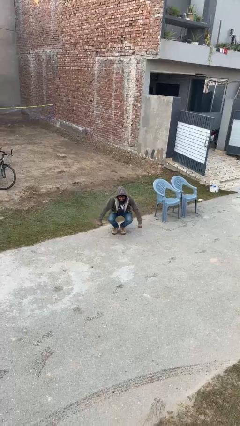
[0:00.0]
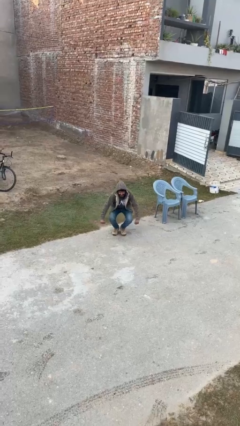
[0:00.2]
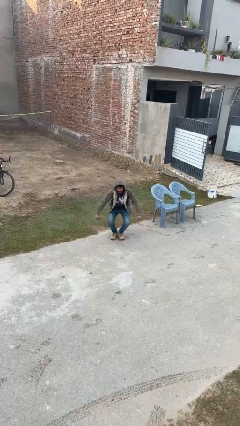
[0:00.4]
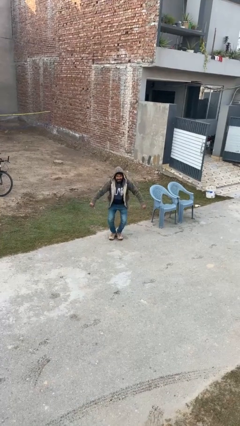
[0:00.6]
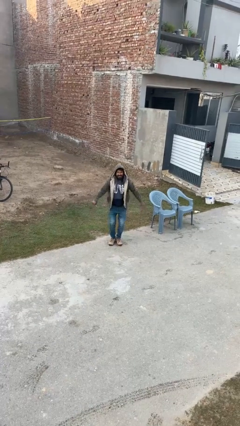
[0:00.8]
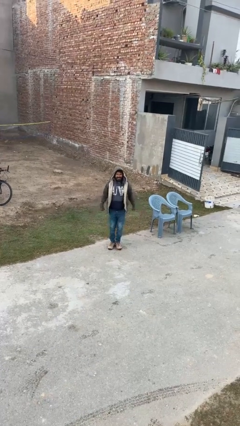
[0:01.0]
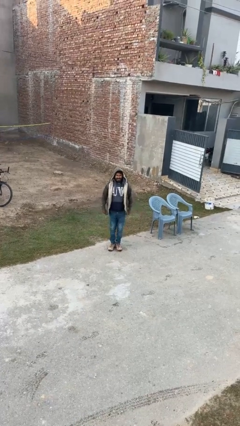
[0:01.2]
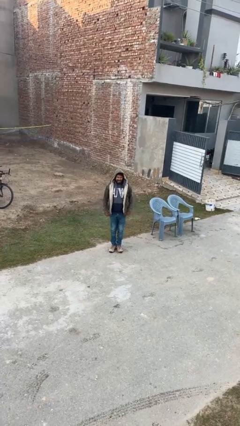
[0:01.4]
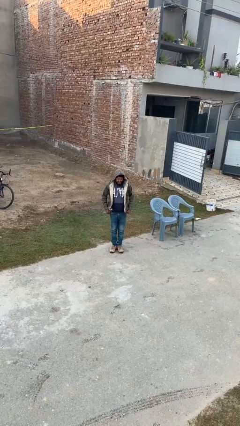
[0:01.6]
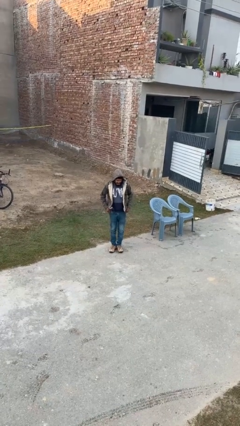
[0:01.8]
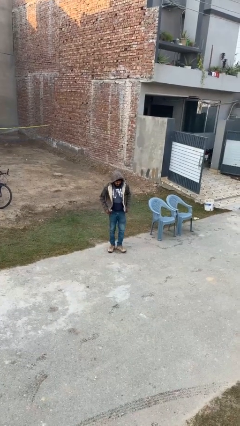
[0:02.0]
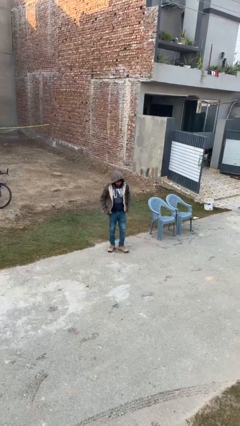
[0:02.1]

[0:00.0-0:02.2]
person stands up

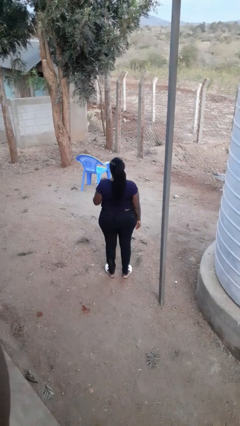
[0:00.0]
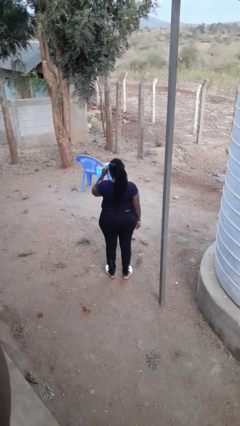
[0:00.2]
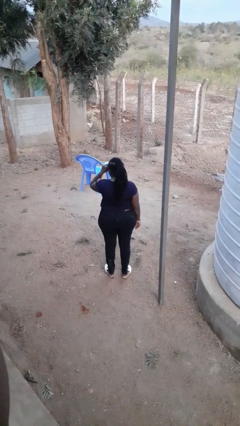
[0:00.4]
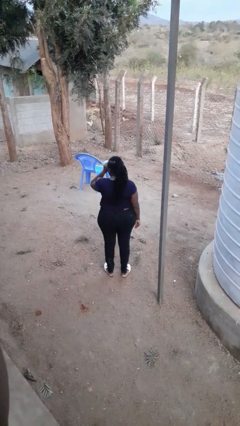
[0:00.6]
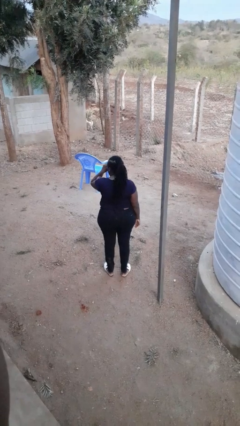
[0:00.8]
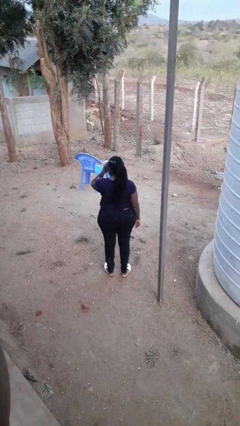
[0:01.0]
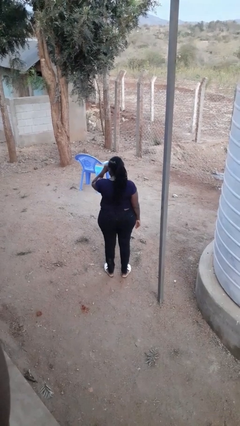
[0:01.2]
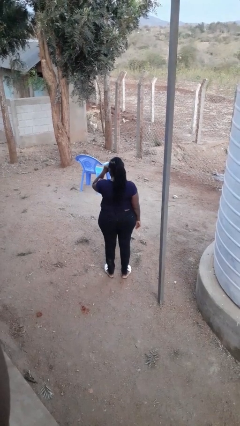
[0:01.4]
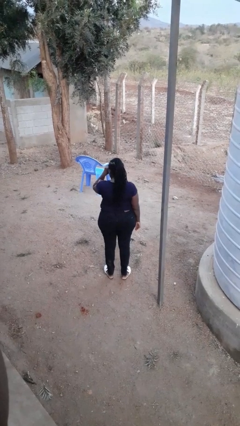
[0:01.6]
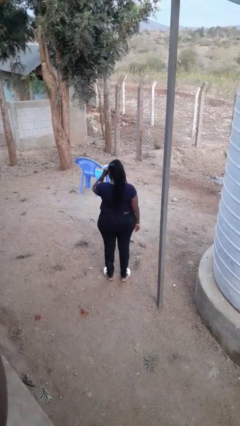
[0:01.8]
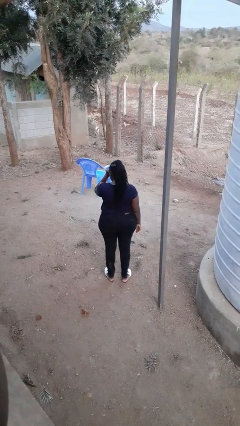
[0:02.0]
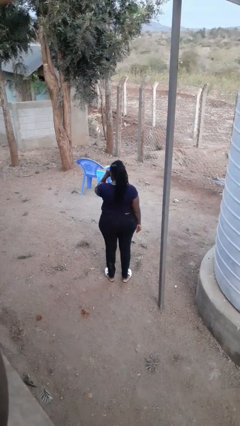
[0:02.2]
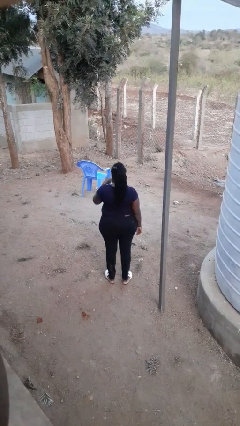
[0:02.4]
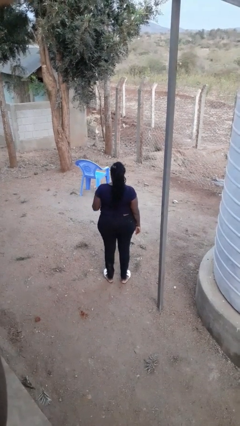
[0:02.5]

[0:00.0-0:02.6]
person rubs eyes

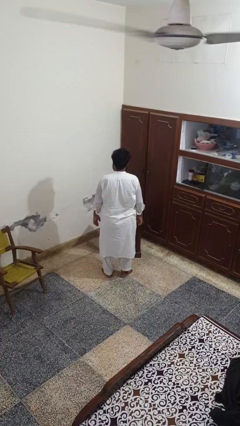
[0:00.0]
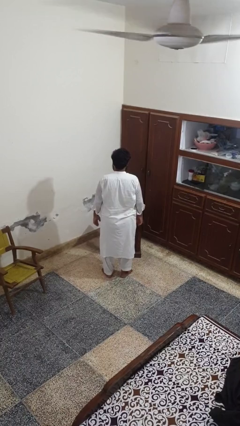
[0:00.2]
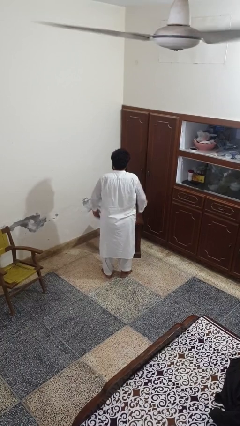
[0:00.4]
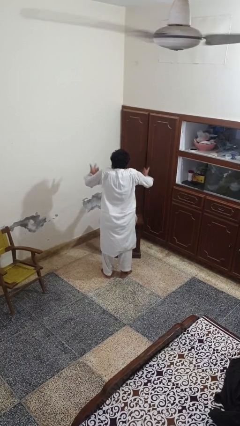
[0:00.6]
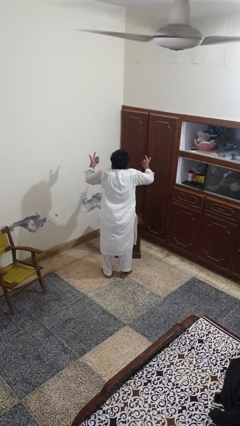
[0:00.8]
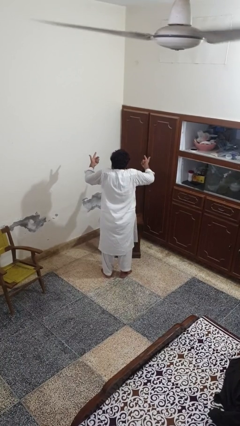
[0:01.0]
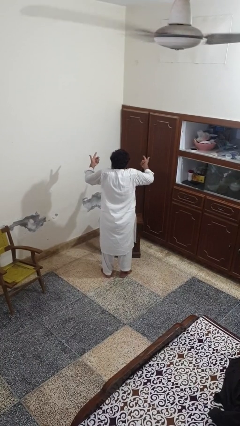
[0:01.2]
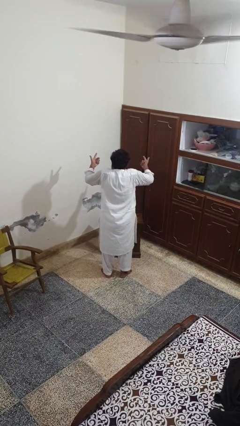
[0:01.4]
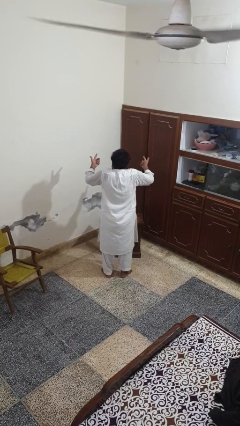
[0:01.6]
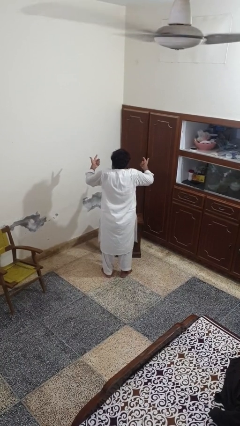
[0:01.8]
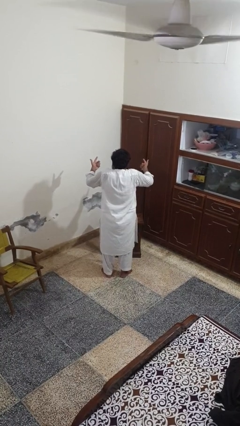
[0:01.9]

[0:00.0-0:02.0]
person shrugs

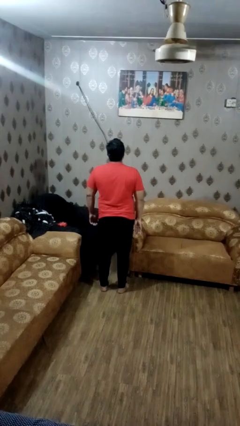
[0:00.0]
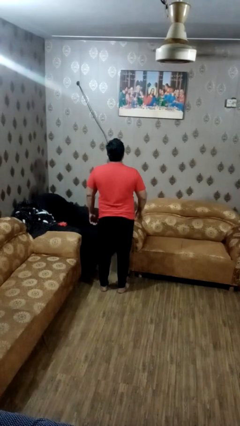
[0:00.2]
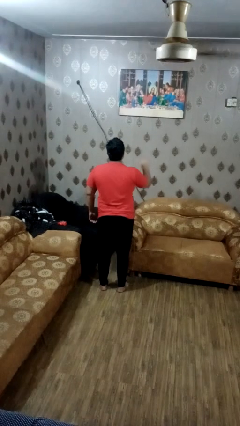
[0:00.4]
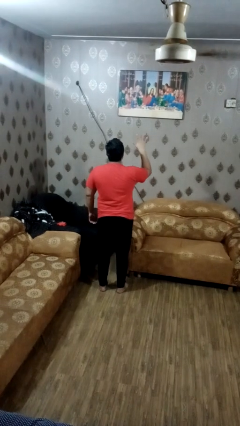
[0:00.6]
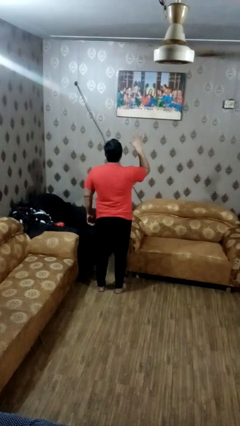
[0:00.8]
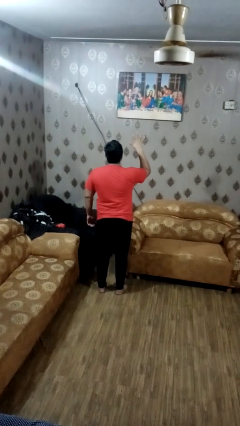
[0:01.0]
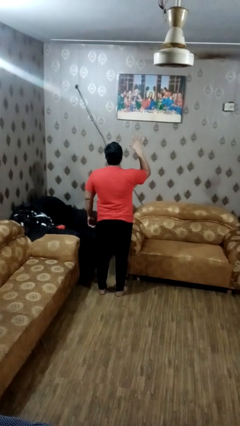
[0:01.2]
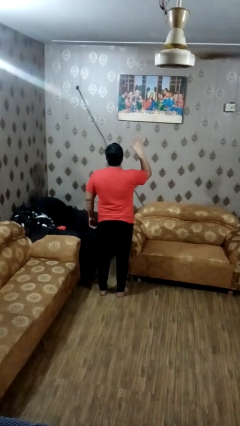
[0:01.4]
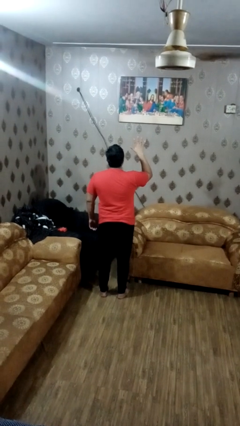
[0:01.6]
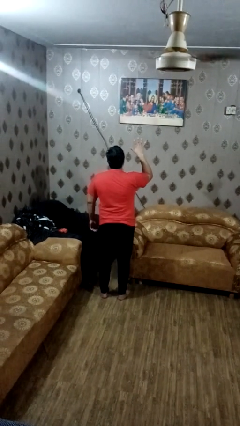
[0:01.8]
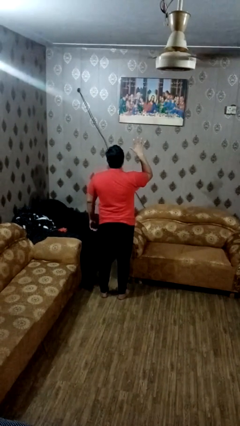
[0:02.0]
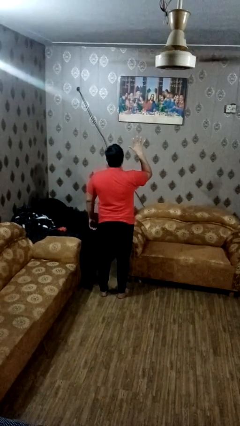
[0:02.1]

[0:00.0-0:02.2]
person gestures number five

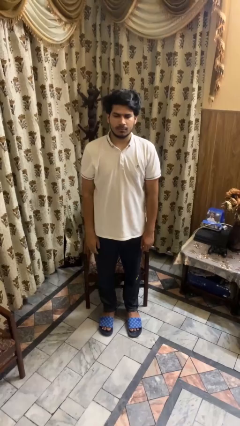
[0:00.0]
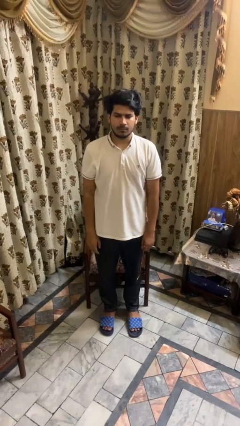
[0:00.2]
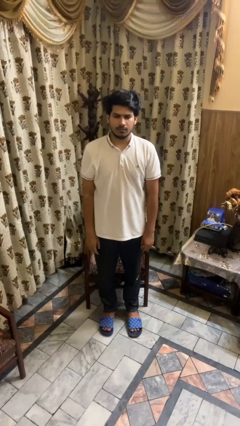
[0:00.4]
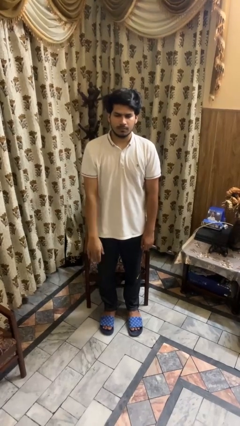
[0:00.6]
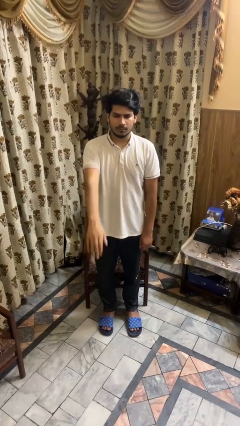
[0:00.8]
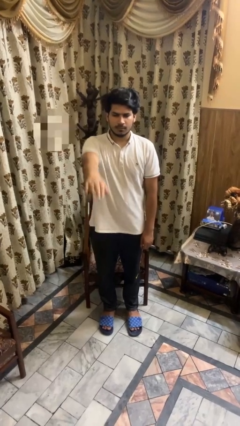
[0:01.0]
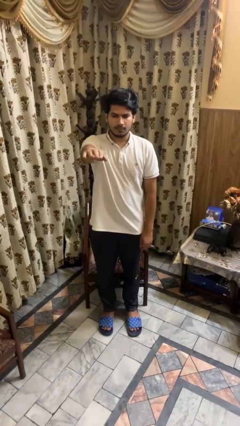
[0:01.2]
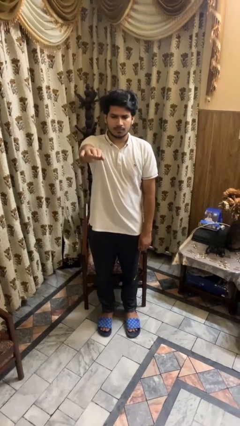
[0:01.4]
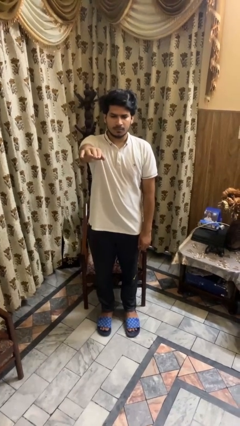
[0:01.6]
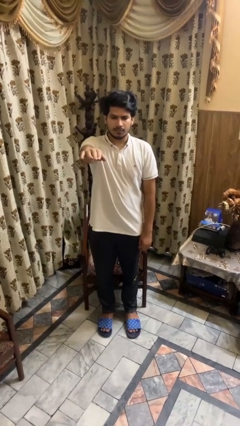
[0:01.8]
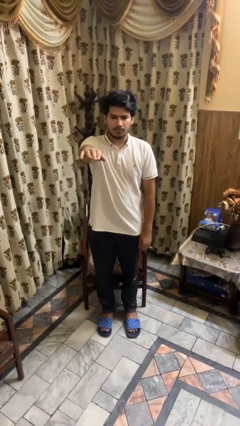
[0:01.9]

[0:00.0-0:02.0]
person gestures swipe up

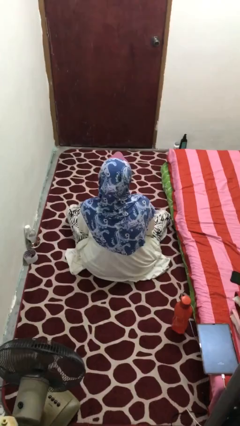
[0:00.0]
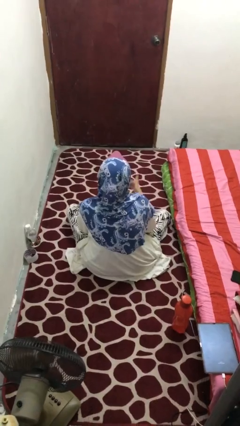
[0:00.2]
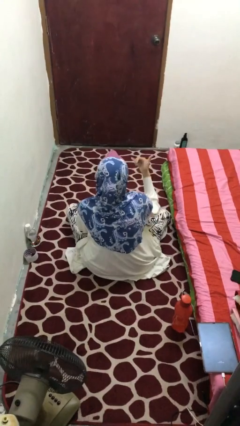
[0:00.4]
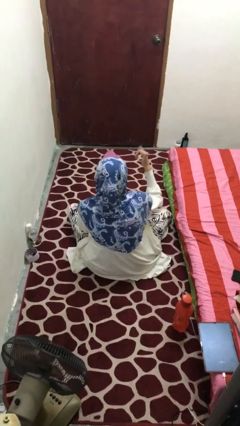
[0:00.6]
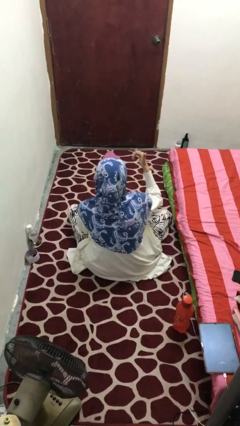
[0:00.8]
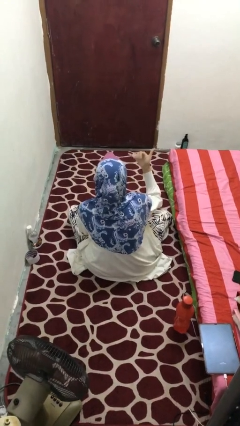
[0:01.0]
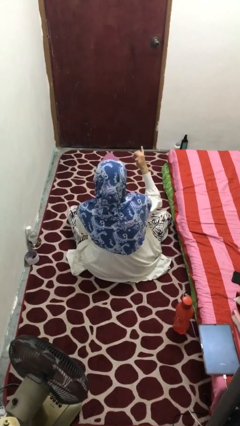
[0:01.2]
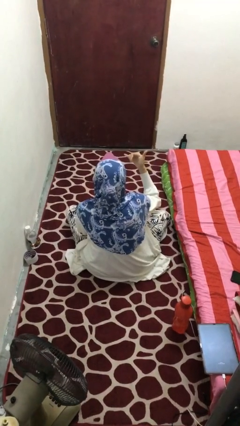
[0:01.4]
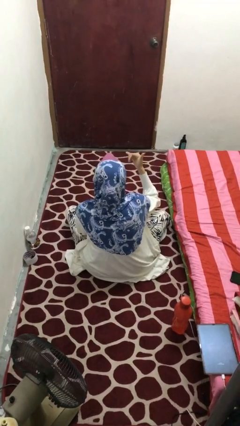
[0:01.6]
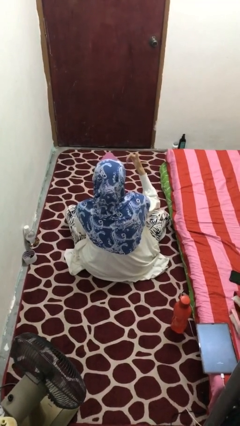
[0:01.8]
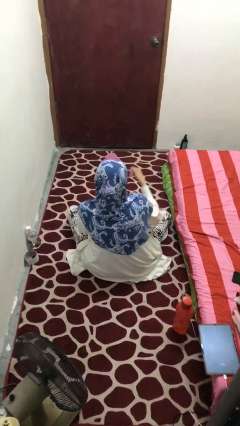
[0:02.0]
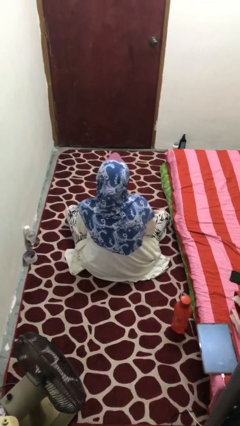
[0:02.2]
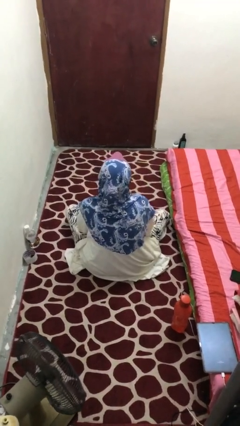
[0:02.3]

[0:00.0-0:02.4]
person gestures hang loose

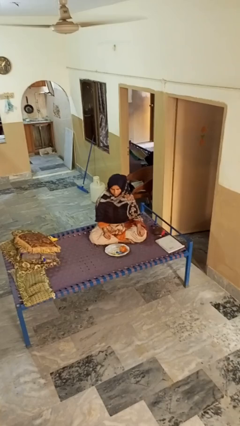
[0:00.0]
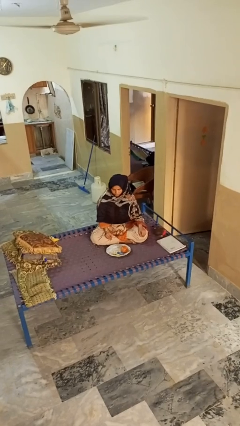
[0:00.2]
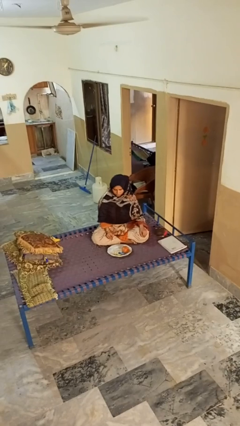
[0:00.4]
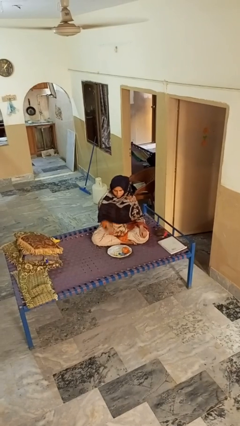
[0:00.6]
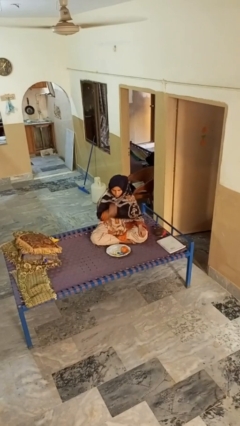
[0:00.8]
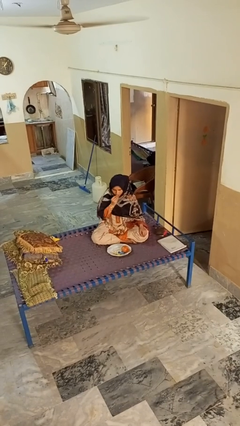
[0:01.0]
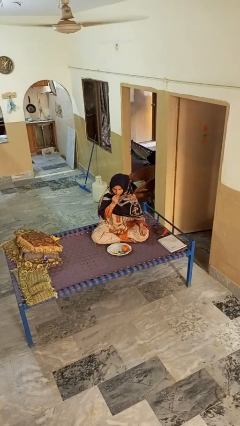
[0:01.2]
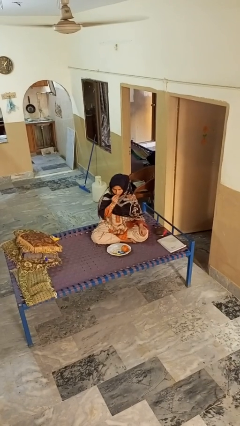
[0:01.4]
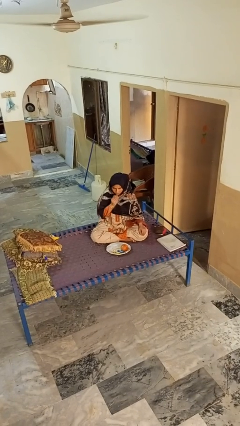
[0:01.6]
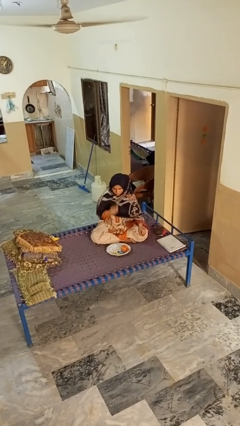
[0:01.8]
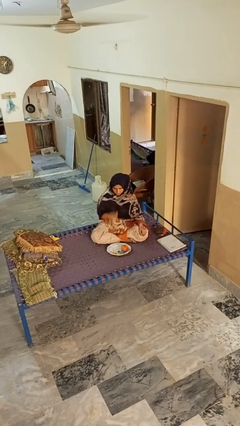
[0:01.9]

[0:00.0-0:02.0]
person eats apple

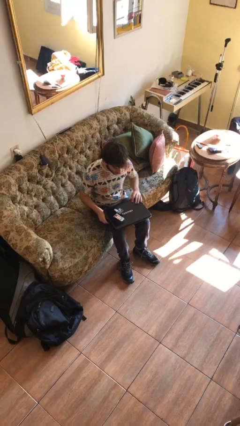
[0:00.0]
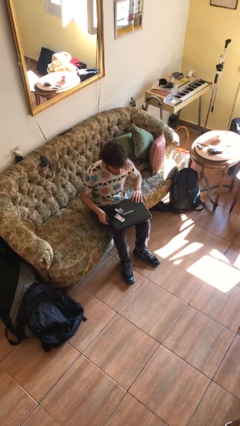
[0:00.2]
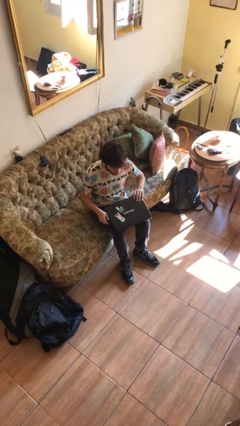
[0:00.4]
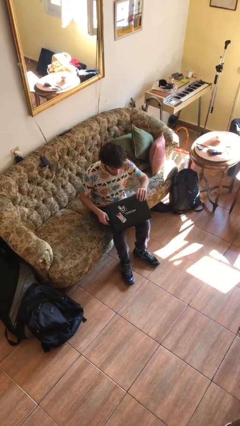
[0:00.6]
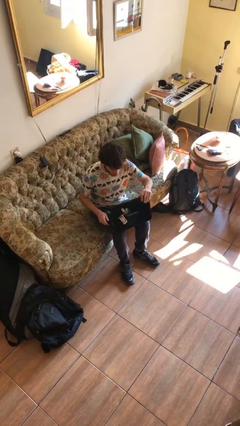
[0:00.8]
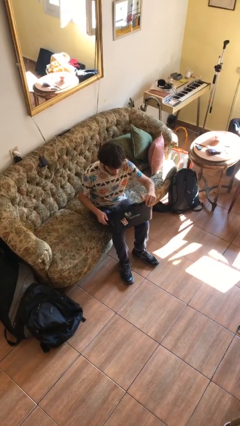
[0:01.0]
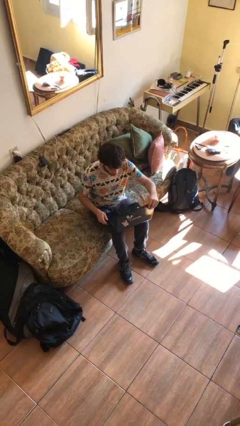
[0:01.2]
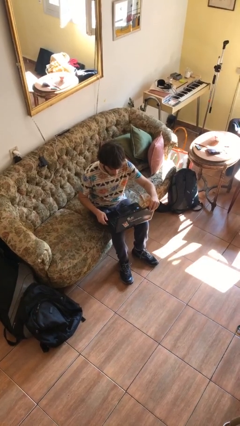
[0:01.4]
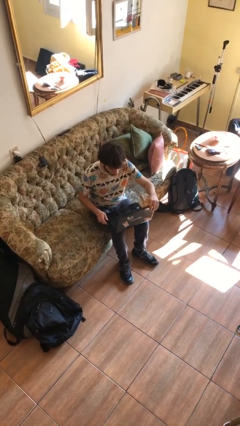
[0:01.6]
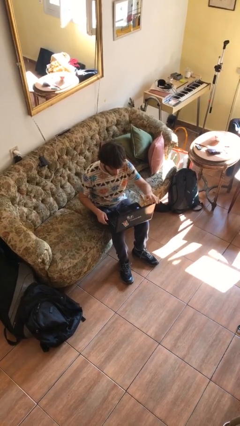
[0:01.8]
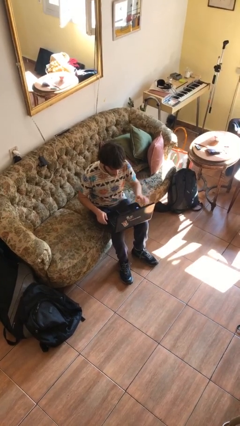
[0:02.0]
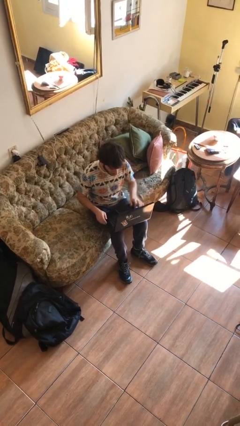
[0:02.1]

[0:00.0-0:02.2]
person opens laptop
